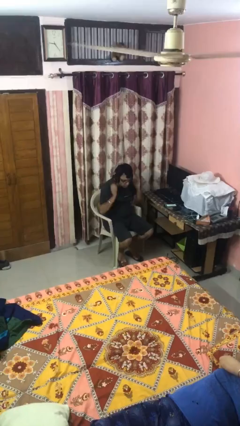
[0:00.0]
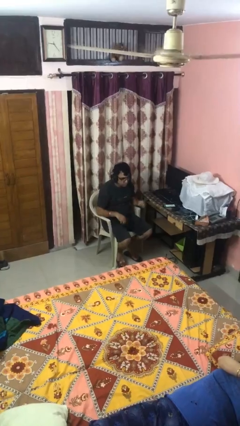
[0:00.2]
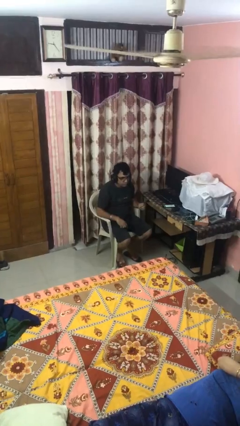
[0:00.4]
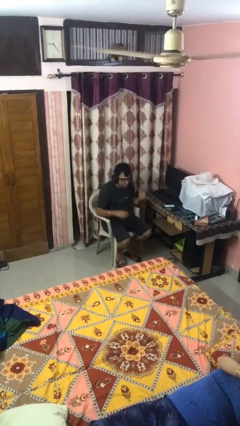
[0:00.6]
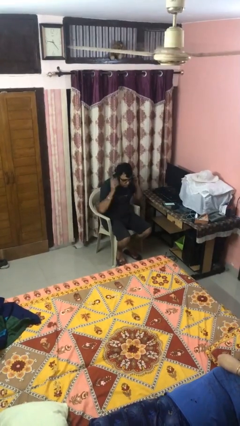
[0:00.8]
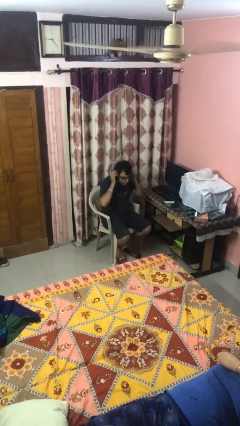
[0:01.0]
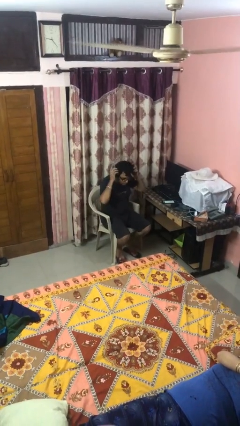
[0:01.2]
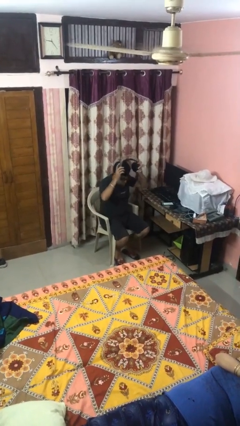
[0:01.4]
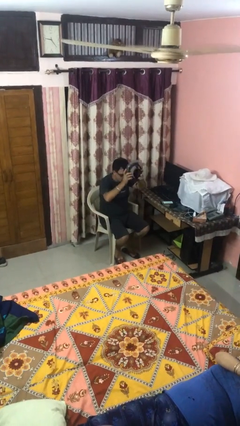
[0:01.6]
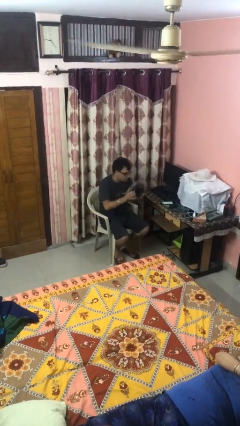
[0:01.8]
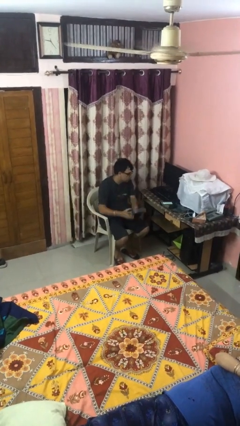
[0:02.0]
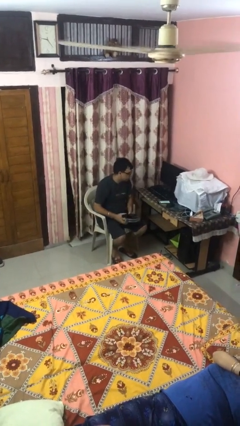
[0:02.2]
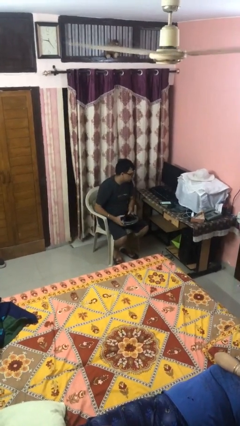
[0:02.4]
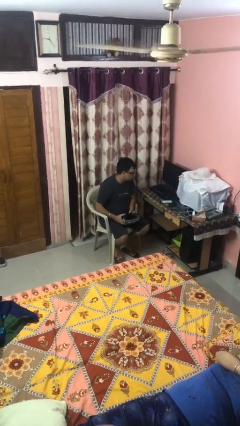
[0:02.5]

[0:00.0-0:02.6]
person takes off headphones

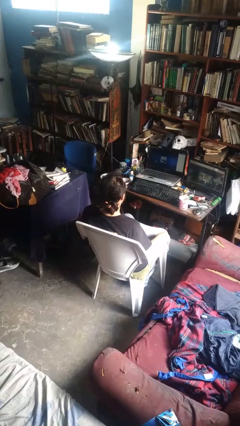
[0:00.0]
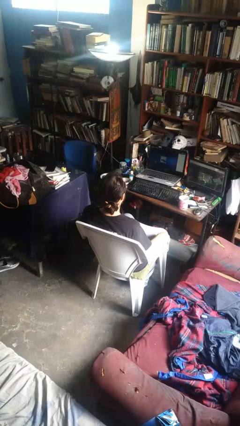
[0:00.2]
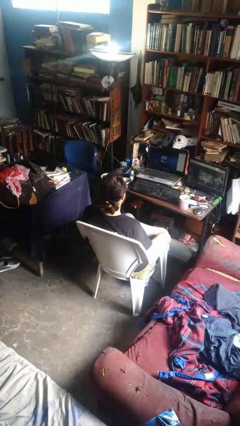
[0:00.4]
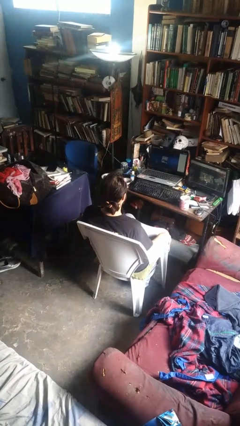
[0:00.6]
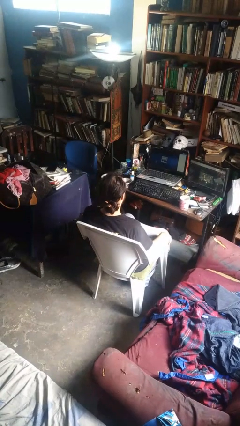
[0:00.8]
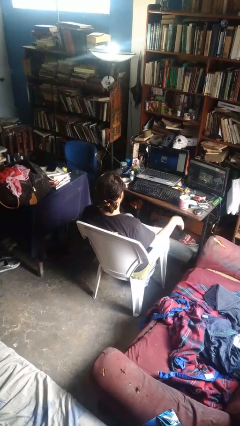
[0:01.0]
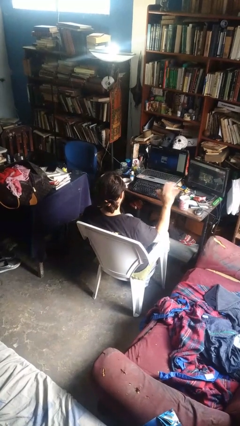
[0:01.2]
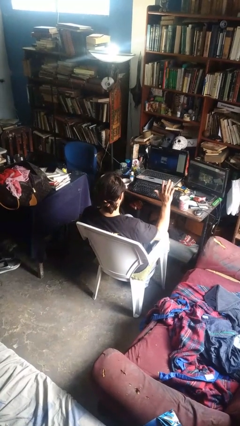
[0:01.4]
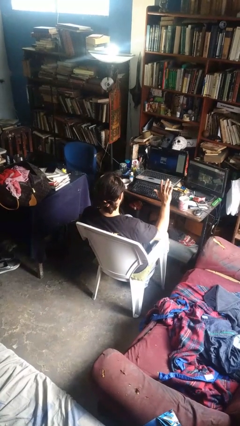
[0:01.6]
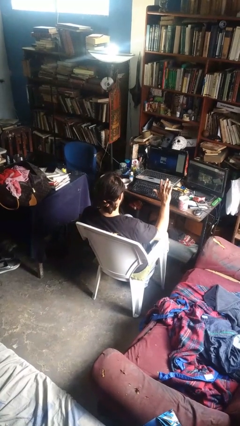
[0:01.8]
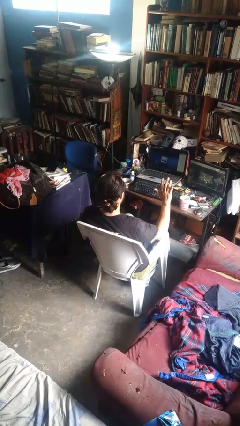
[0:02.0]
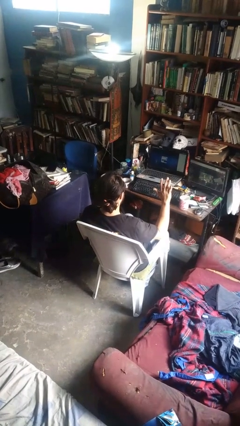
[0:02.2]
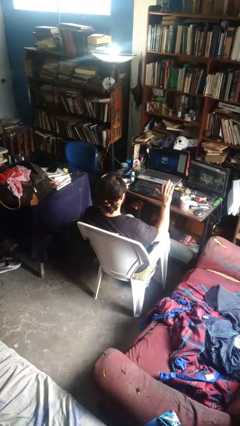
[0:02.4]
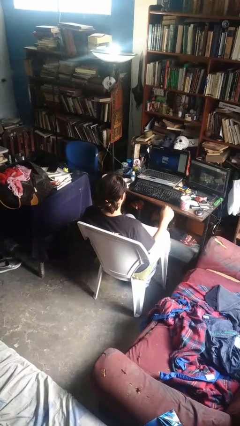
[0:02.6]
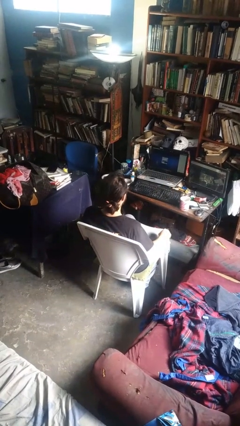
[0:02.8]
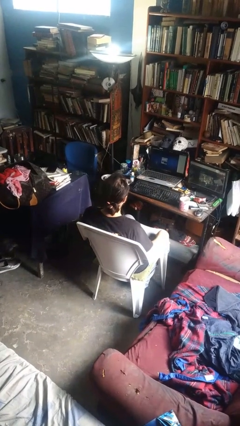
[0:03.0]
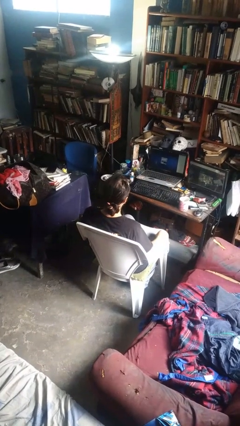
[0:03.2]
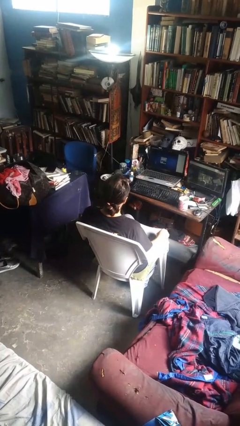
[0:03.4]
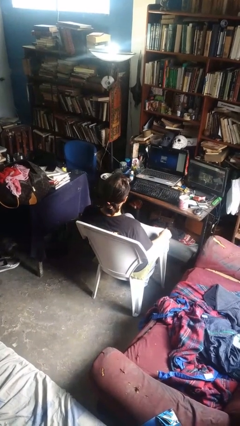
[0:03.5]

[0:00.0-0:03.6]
person gestures number five

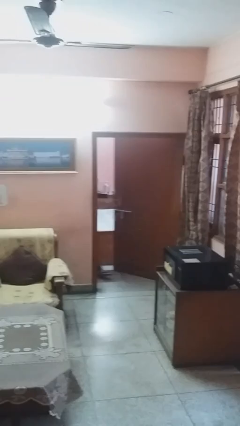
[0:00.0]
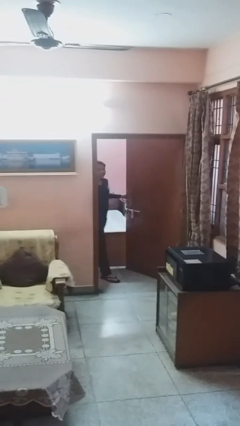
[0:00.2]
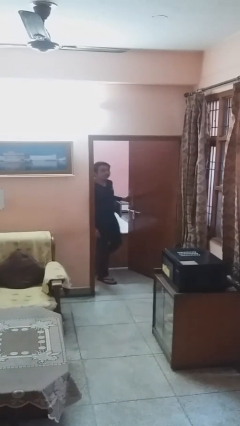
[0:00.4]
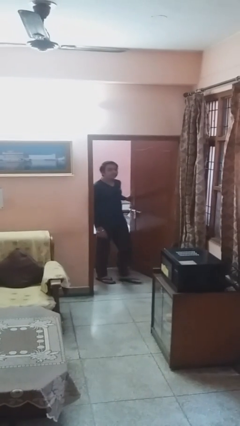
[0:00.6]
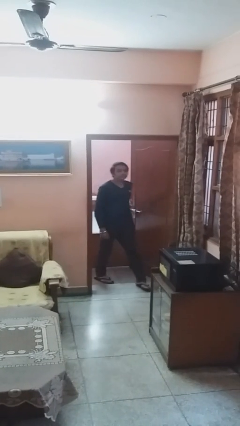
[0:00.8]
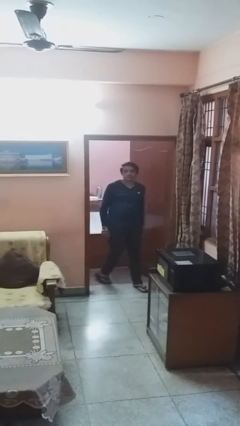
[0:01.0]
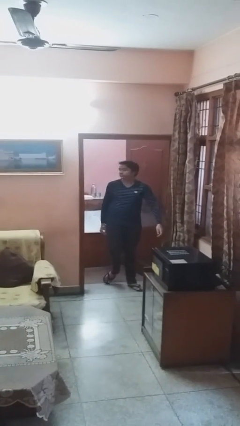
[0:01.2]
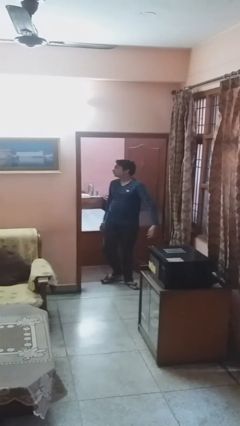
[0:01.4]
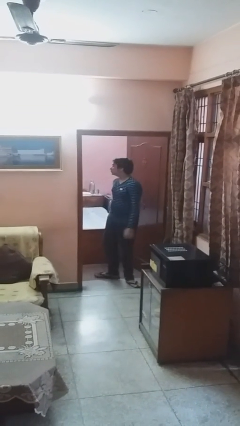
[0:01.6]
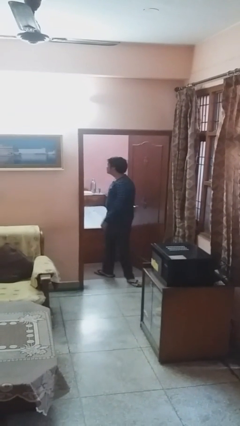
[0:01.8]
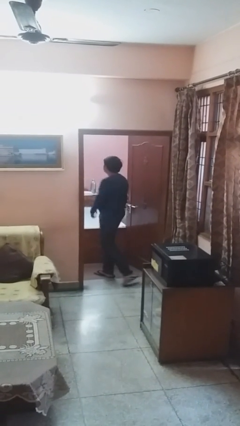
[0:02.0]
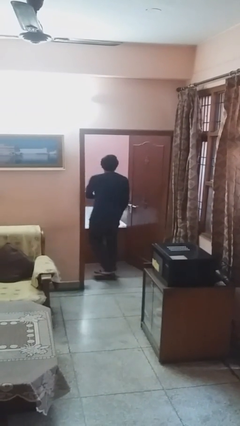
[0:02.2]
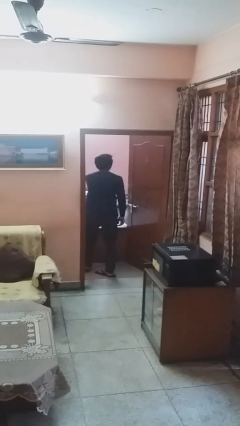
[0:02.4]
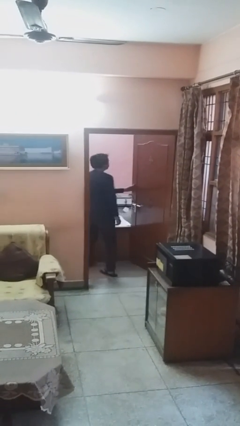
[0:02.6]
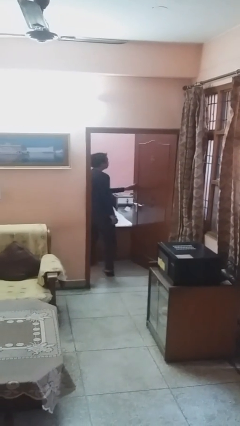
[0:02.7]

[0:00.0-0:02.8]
person opens facility door

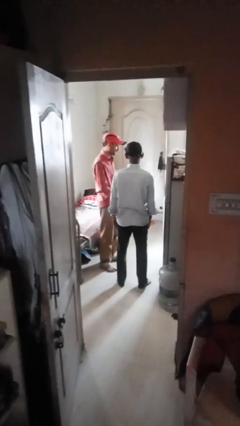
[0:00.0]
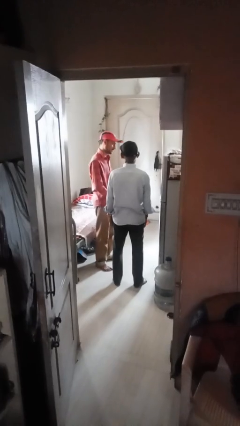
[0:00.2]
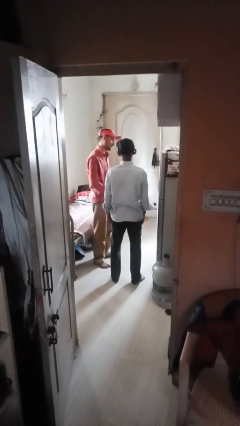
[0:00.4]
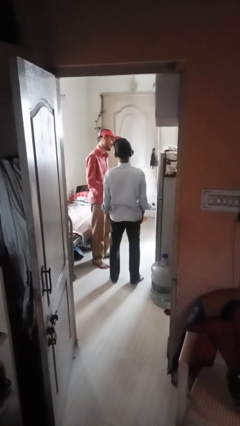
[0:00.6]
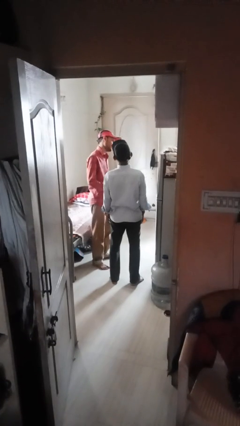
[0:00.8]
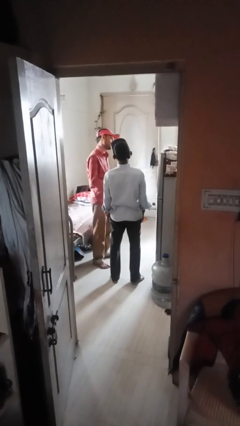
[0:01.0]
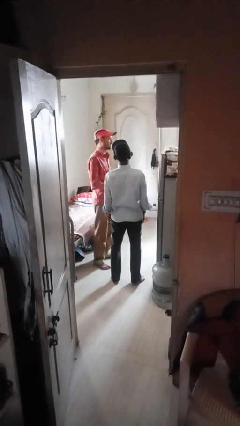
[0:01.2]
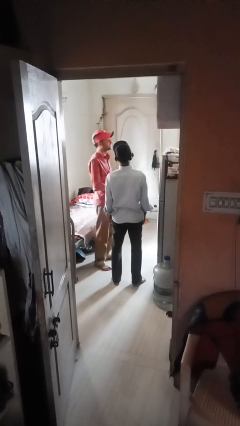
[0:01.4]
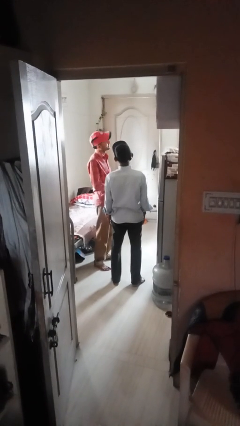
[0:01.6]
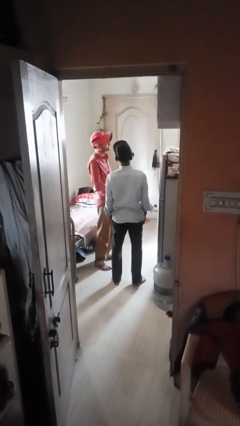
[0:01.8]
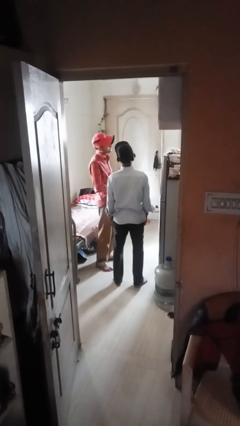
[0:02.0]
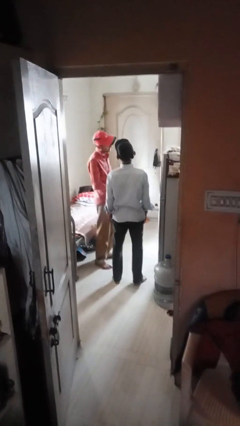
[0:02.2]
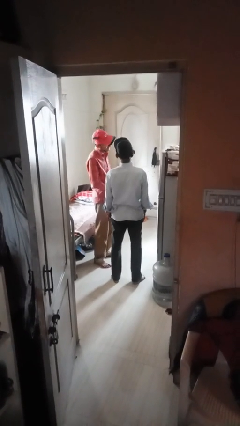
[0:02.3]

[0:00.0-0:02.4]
person laughs with person

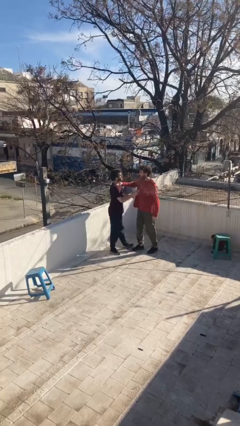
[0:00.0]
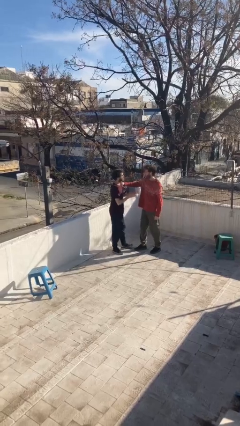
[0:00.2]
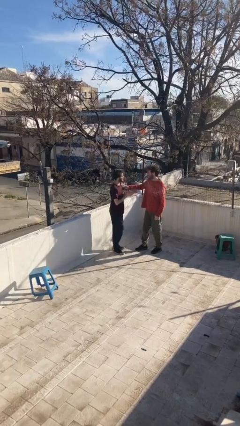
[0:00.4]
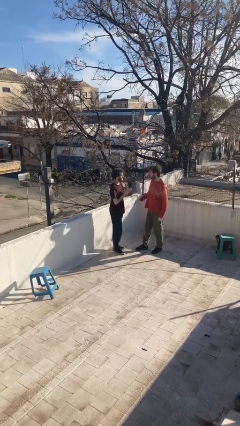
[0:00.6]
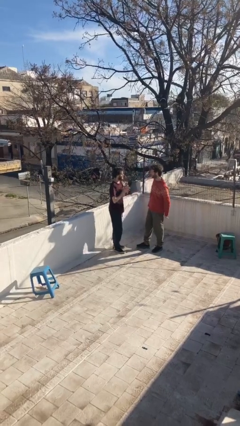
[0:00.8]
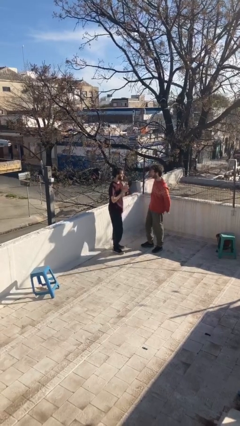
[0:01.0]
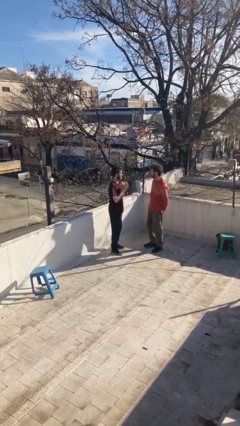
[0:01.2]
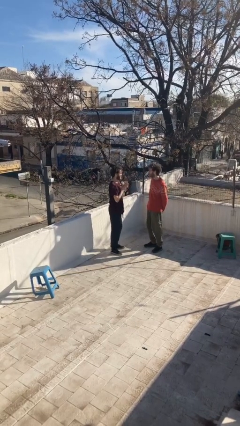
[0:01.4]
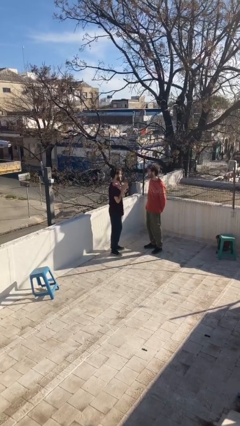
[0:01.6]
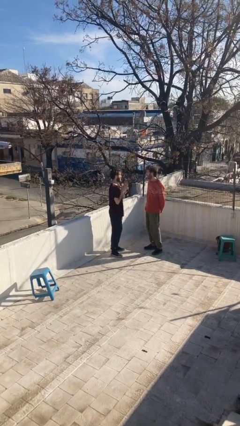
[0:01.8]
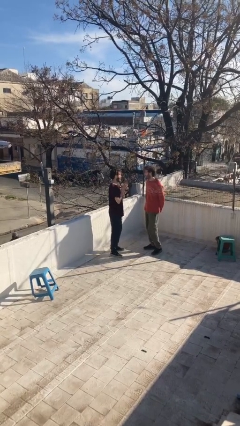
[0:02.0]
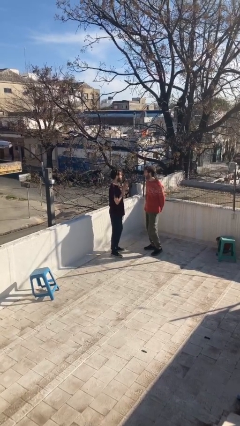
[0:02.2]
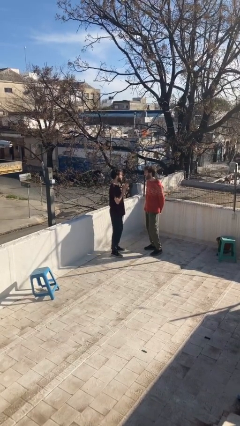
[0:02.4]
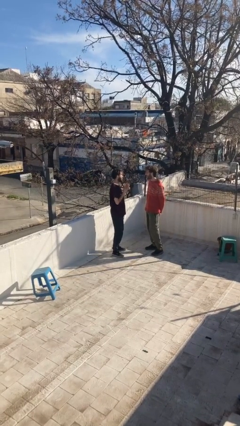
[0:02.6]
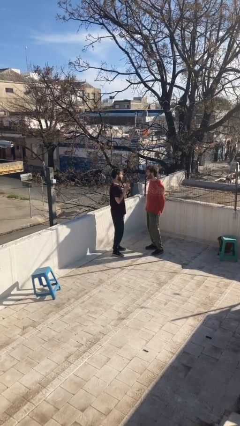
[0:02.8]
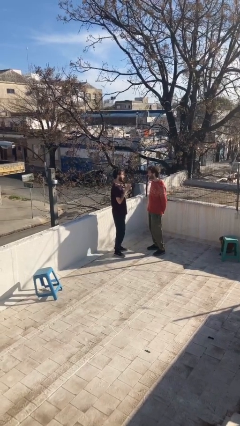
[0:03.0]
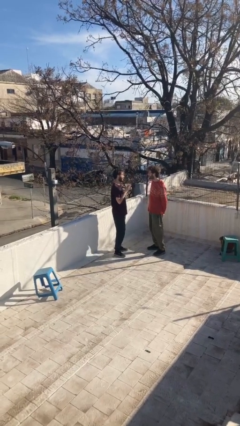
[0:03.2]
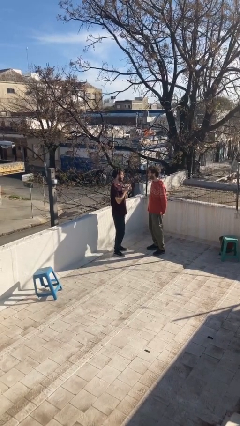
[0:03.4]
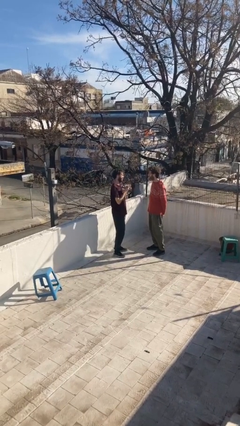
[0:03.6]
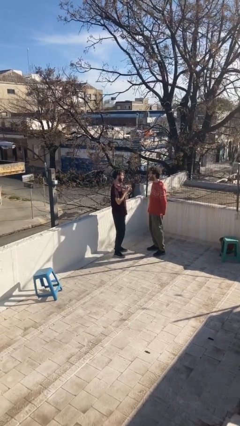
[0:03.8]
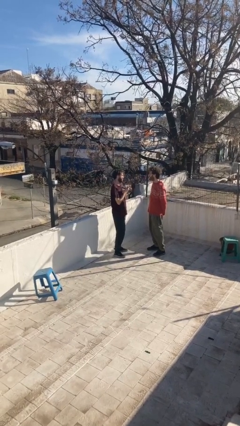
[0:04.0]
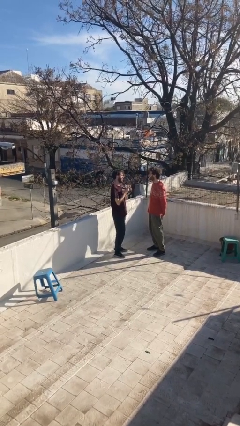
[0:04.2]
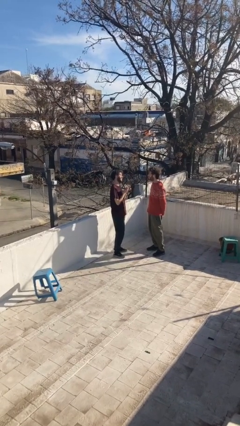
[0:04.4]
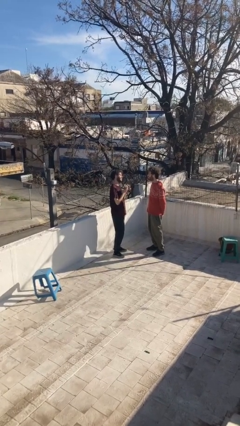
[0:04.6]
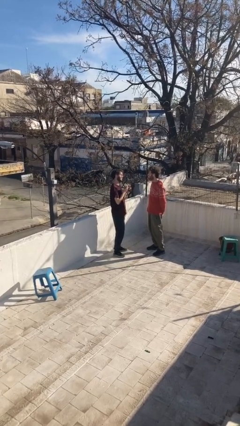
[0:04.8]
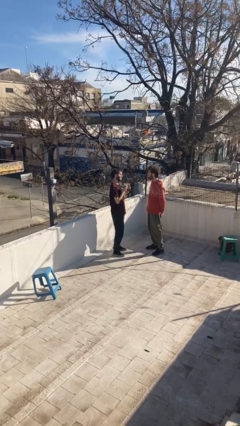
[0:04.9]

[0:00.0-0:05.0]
person talks to person

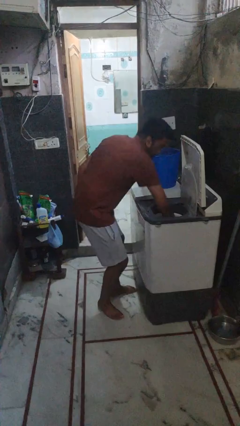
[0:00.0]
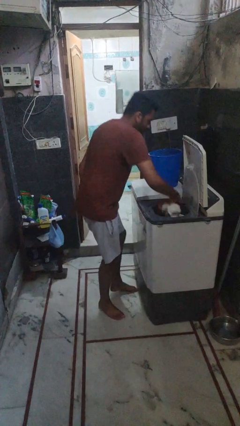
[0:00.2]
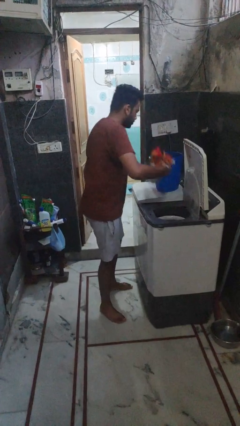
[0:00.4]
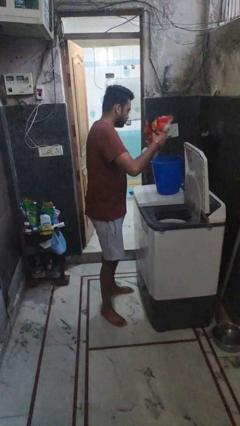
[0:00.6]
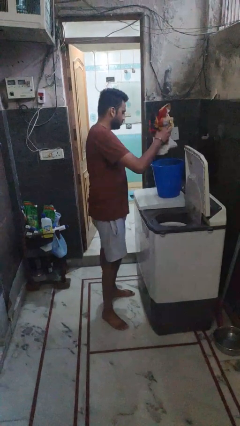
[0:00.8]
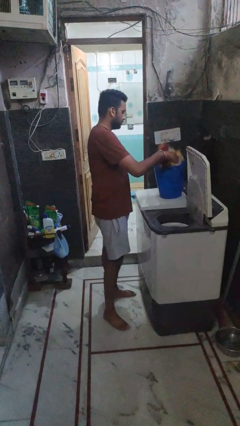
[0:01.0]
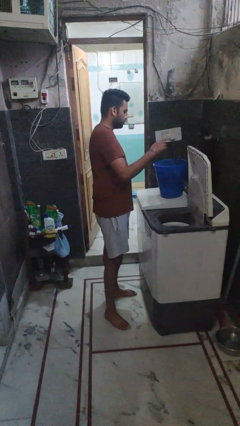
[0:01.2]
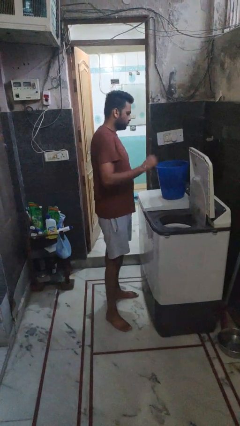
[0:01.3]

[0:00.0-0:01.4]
person unloads dryer
